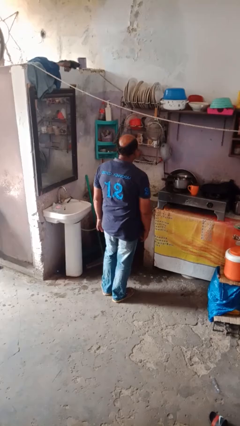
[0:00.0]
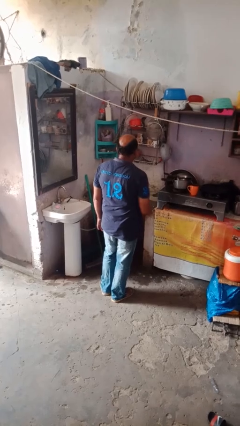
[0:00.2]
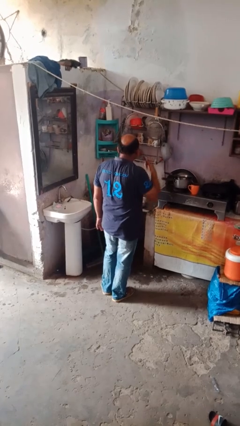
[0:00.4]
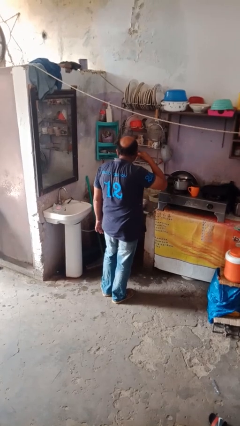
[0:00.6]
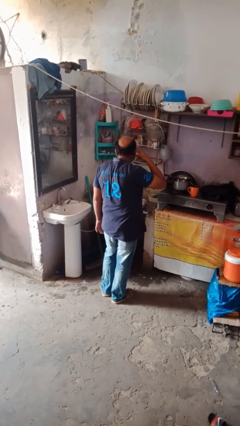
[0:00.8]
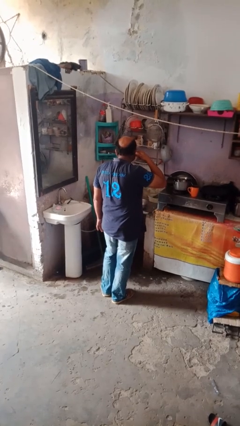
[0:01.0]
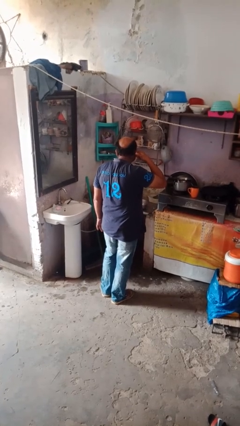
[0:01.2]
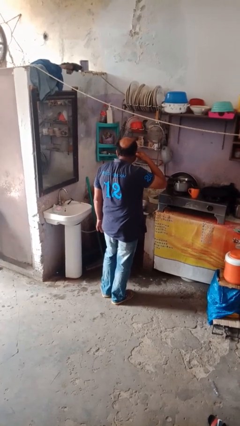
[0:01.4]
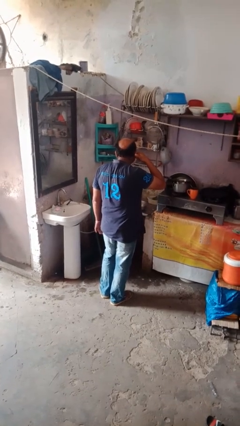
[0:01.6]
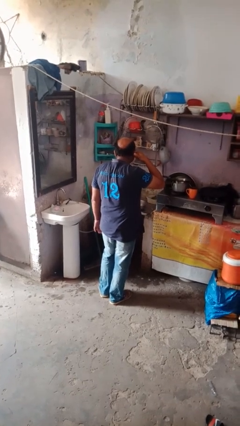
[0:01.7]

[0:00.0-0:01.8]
person gestures call me

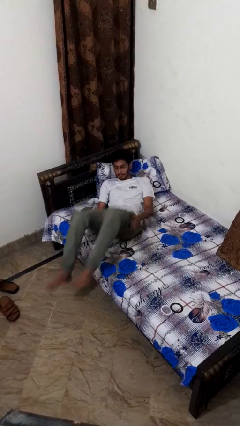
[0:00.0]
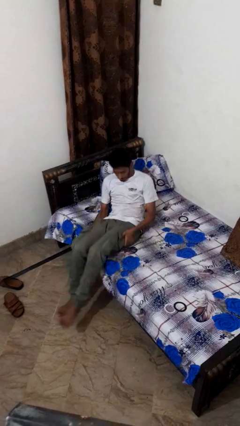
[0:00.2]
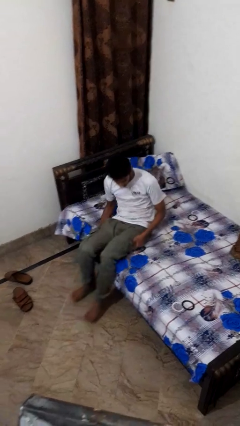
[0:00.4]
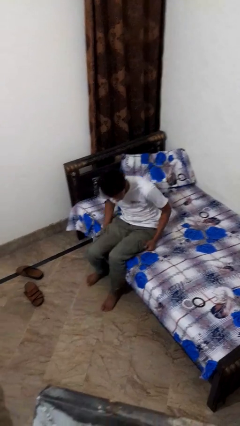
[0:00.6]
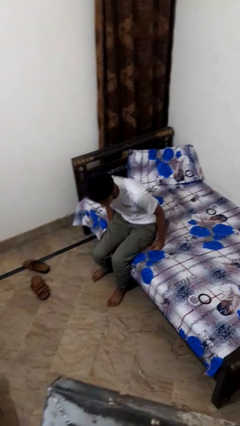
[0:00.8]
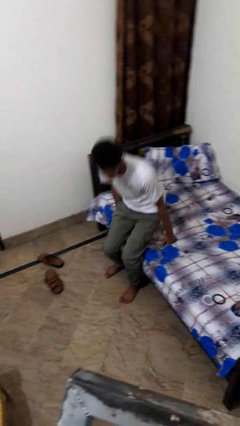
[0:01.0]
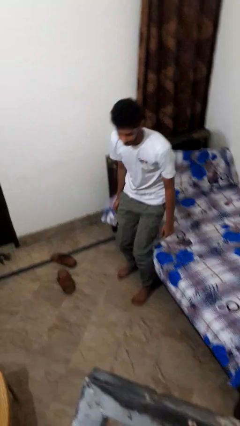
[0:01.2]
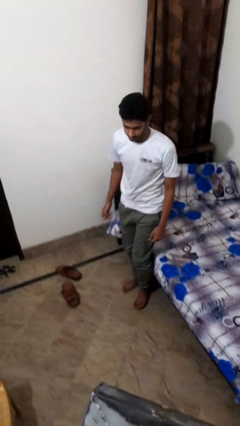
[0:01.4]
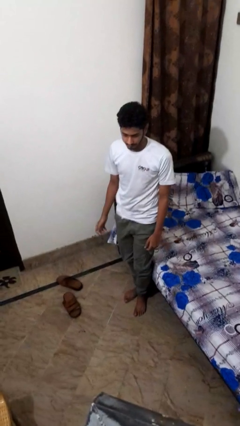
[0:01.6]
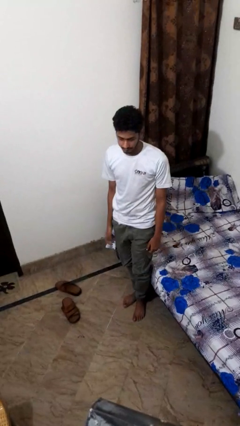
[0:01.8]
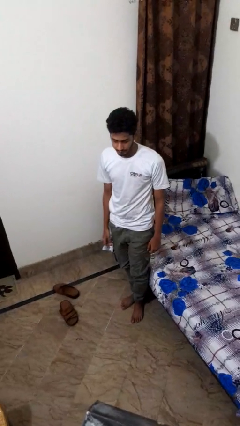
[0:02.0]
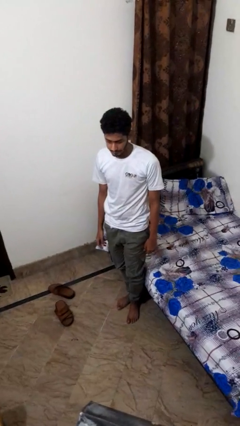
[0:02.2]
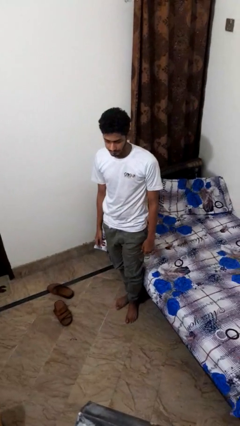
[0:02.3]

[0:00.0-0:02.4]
person stands up

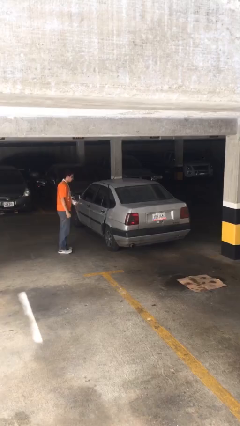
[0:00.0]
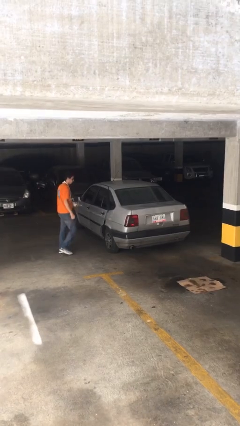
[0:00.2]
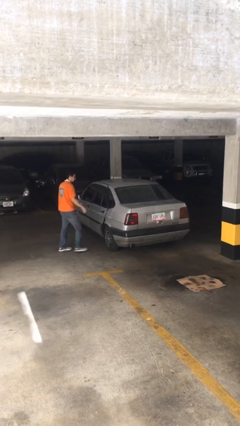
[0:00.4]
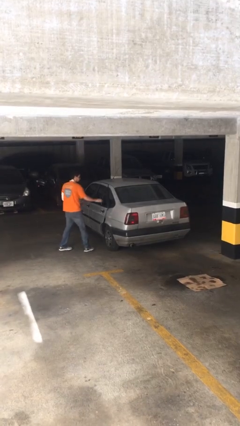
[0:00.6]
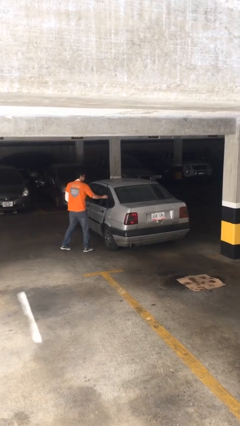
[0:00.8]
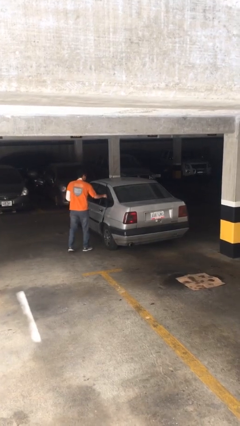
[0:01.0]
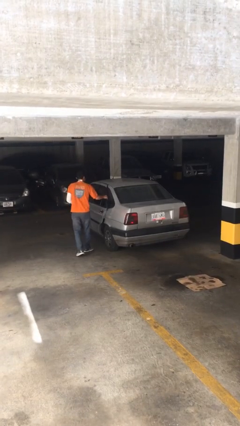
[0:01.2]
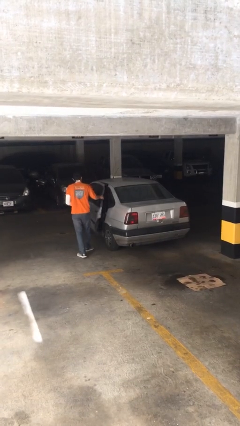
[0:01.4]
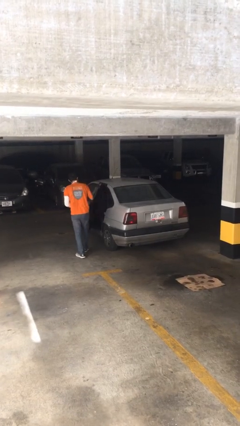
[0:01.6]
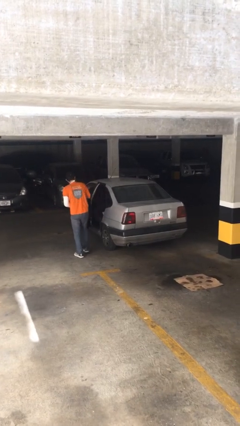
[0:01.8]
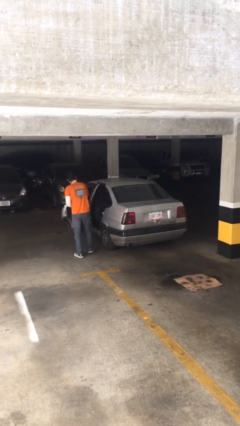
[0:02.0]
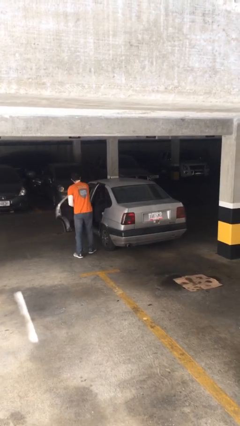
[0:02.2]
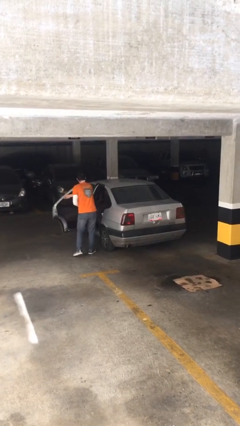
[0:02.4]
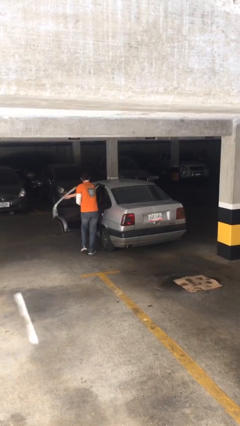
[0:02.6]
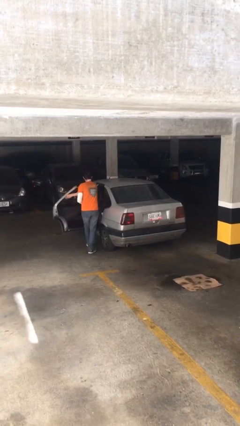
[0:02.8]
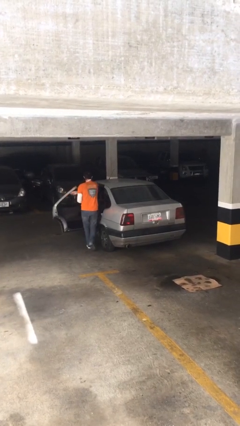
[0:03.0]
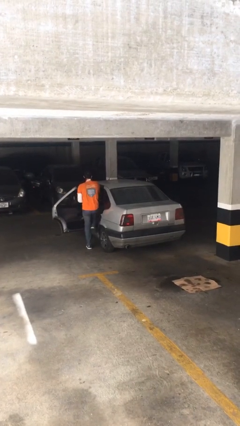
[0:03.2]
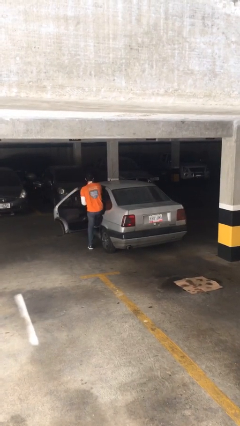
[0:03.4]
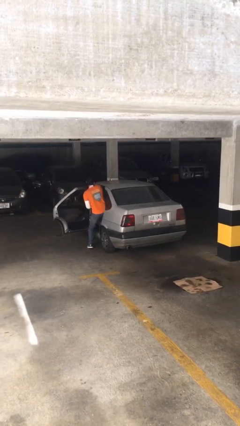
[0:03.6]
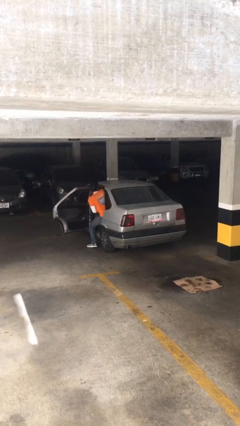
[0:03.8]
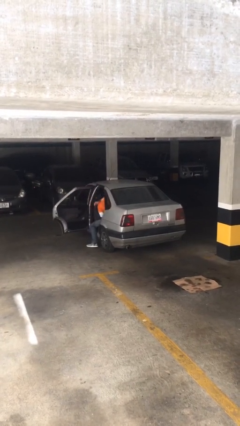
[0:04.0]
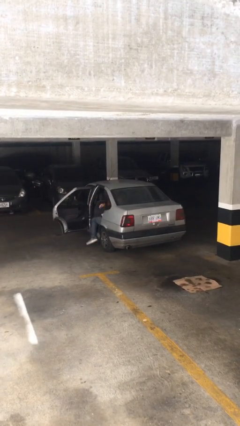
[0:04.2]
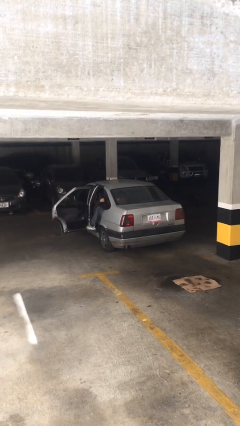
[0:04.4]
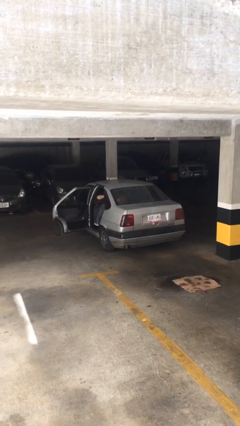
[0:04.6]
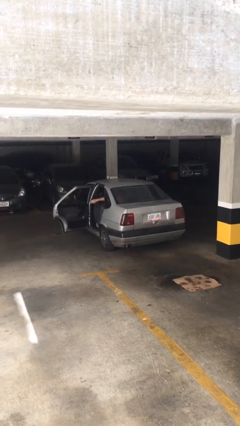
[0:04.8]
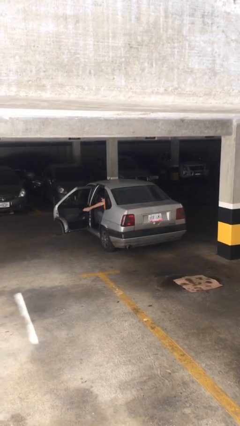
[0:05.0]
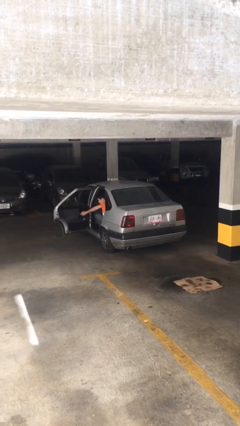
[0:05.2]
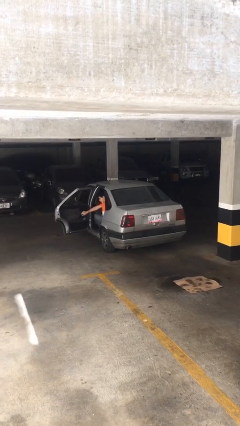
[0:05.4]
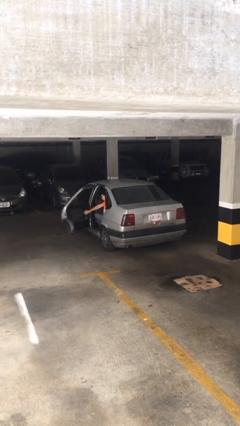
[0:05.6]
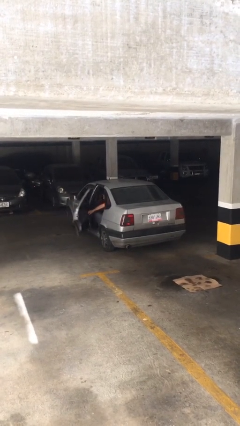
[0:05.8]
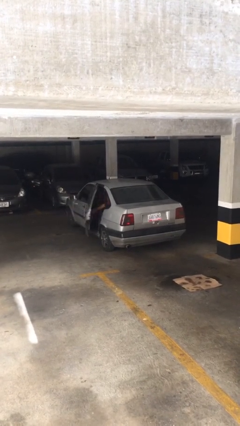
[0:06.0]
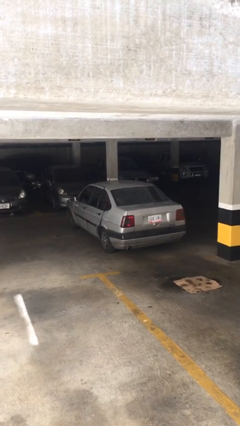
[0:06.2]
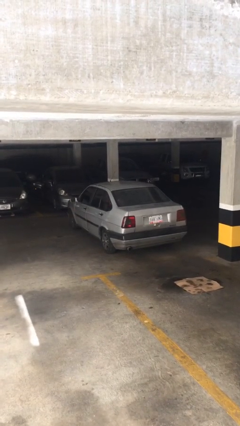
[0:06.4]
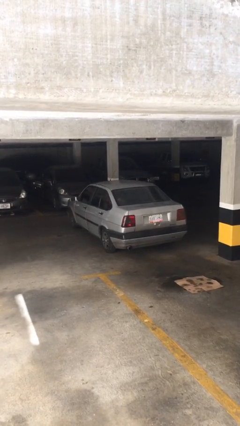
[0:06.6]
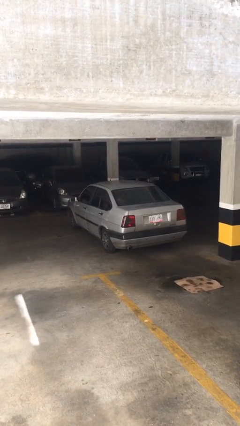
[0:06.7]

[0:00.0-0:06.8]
car picks up person

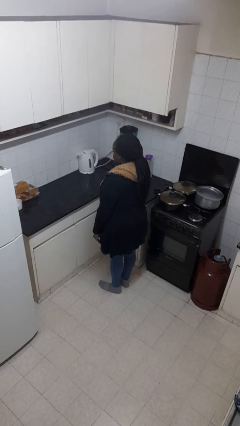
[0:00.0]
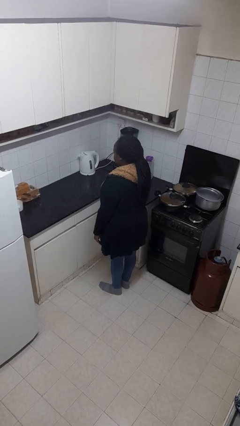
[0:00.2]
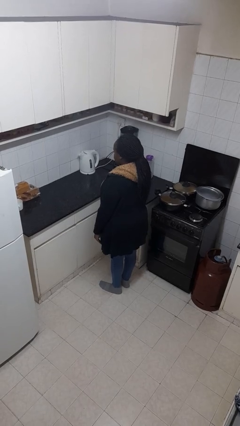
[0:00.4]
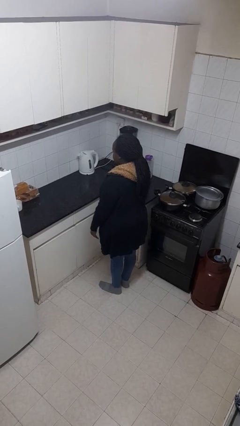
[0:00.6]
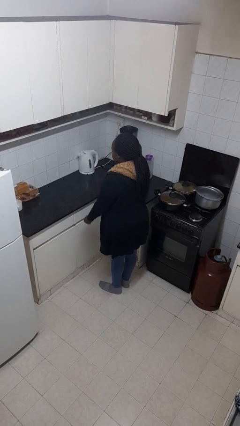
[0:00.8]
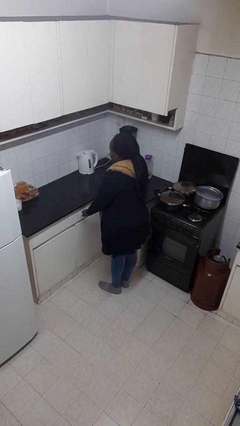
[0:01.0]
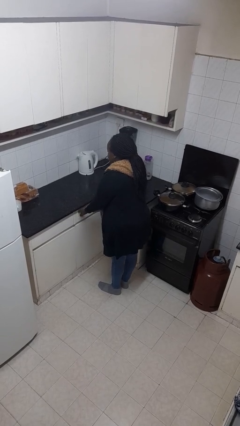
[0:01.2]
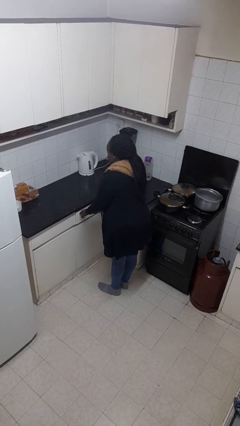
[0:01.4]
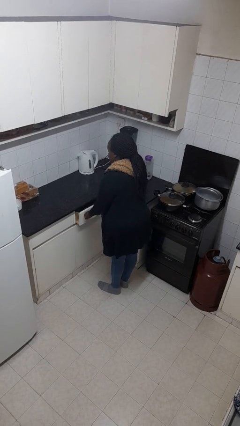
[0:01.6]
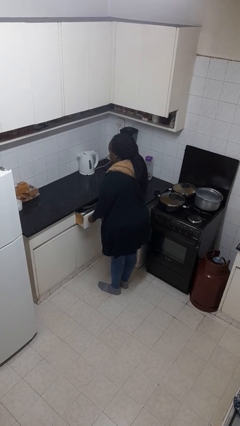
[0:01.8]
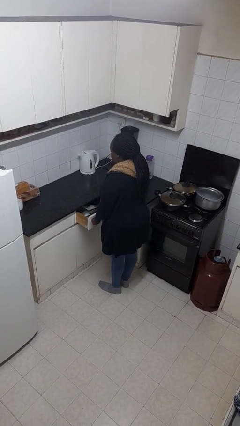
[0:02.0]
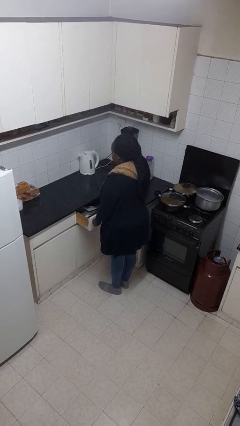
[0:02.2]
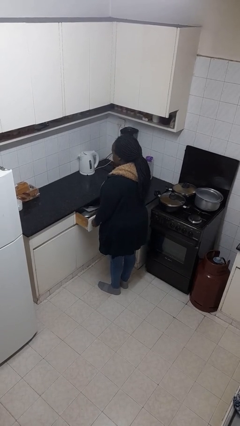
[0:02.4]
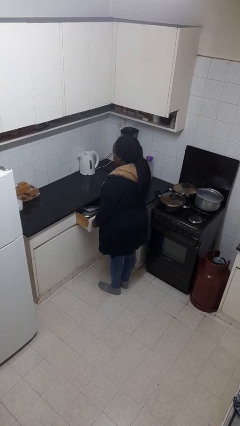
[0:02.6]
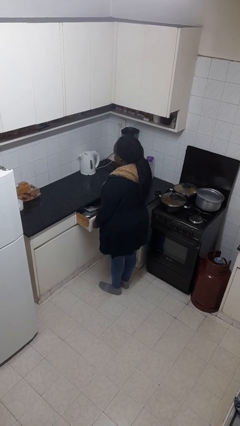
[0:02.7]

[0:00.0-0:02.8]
person opens kitchen drawer

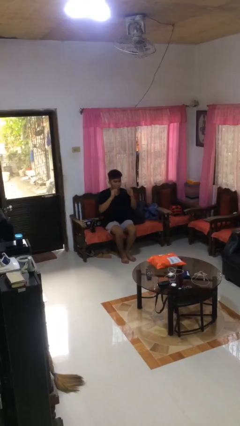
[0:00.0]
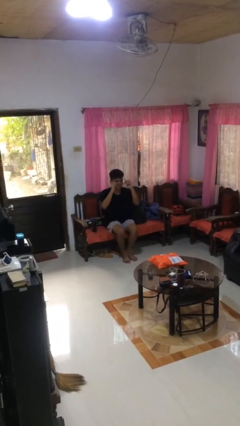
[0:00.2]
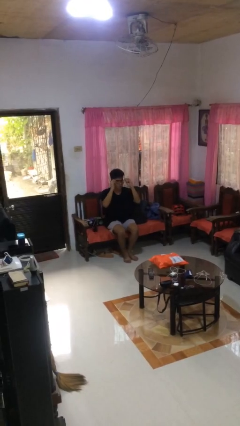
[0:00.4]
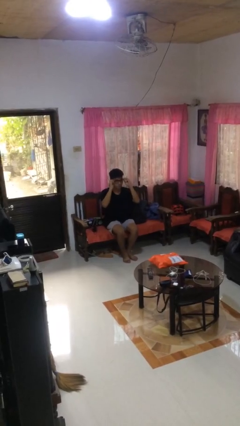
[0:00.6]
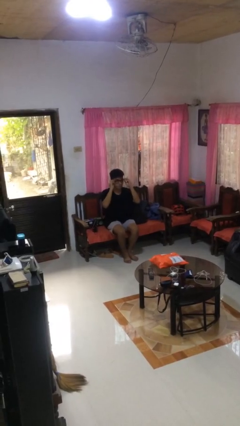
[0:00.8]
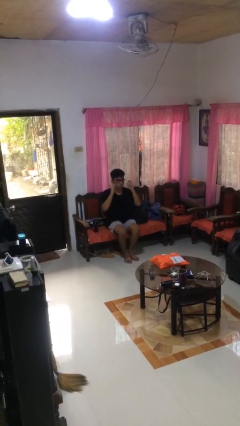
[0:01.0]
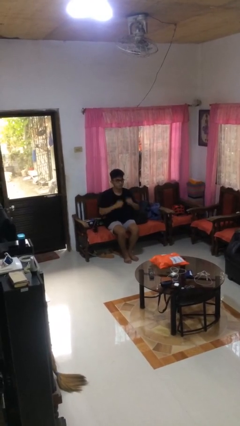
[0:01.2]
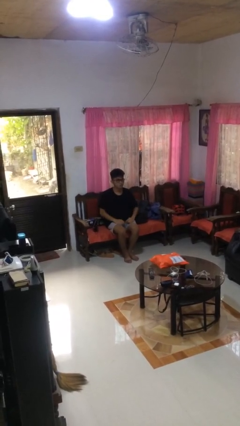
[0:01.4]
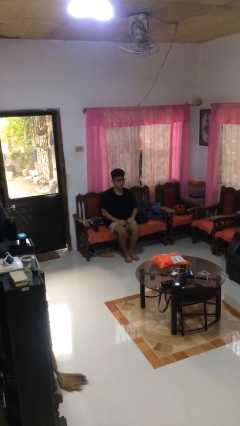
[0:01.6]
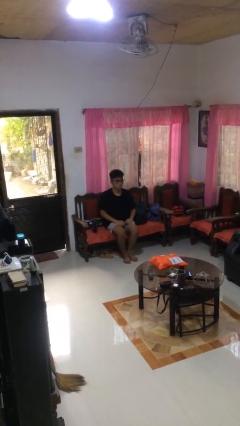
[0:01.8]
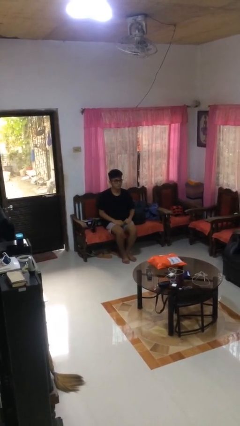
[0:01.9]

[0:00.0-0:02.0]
person puts on glasses

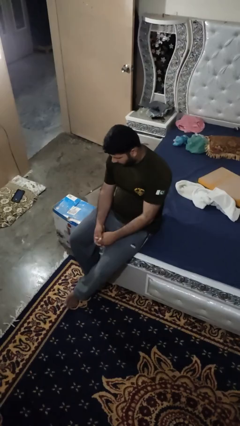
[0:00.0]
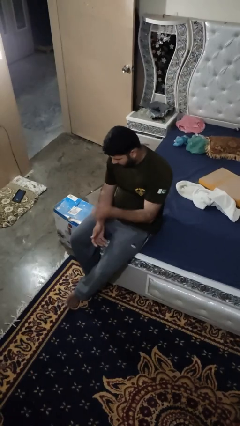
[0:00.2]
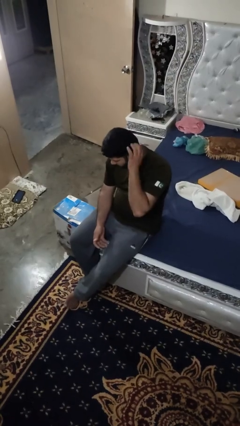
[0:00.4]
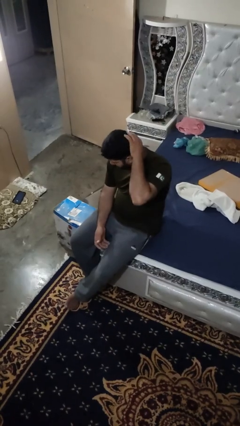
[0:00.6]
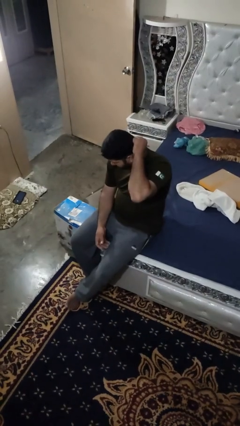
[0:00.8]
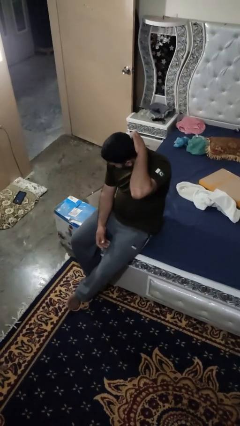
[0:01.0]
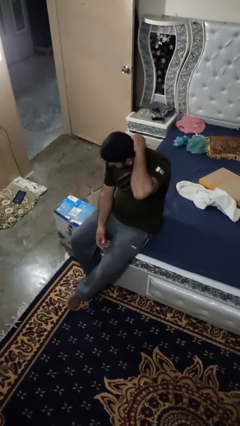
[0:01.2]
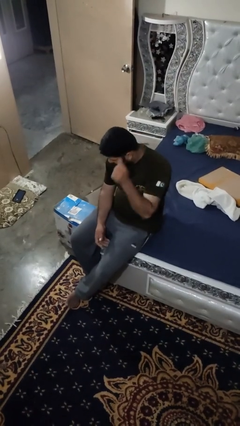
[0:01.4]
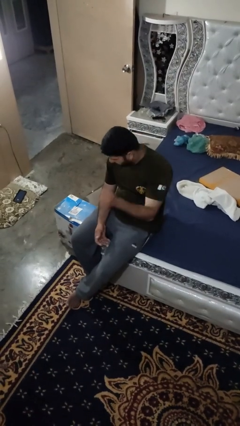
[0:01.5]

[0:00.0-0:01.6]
person strokes hair
